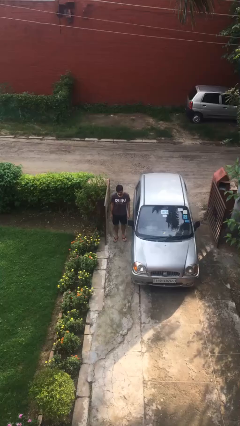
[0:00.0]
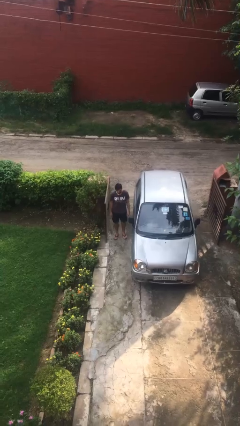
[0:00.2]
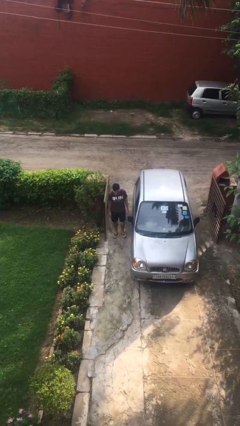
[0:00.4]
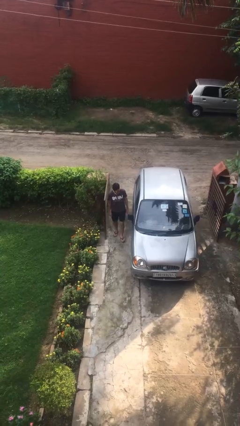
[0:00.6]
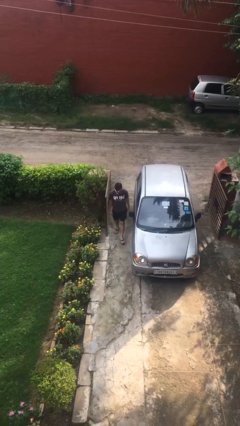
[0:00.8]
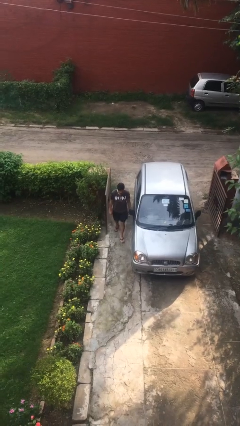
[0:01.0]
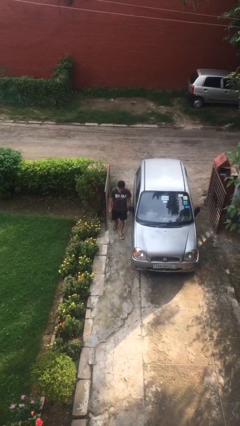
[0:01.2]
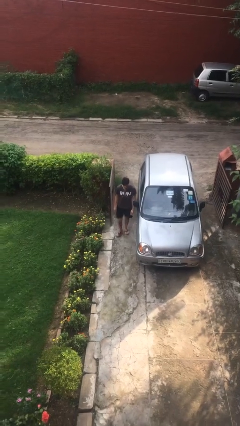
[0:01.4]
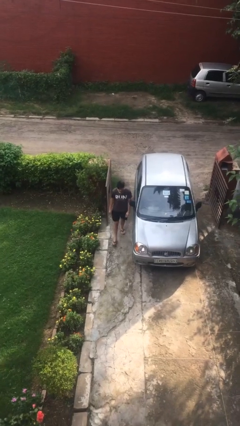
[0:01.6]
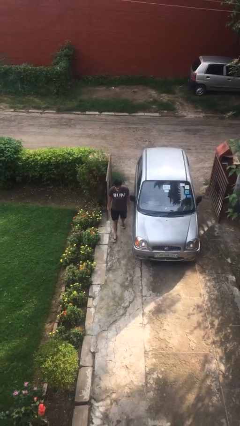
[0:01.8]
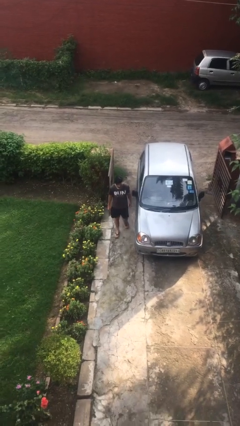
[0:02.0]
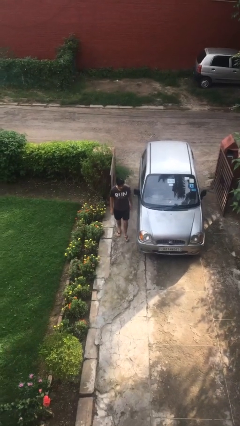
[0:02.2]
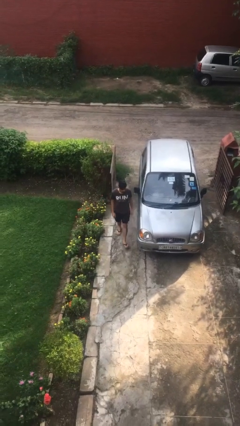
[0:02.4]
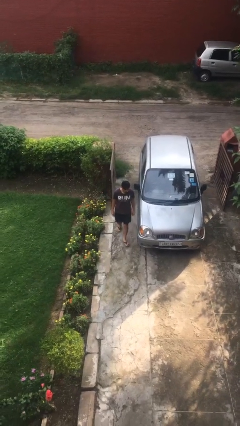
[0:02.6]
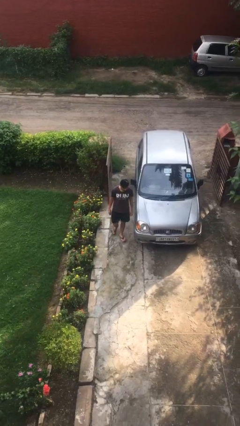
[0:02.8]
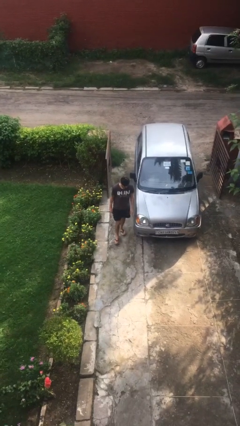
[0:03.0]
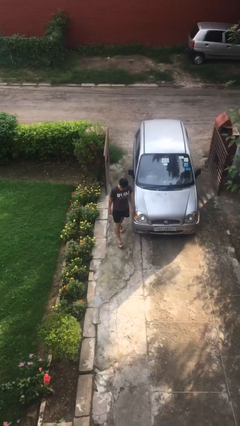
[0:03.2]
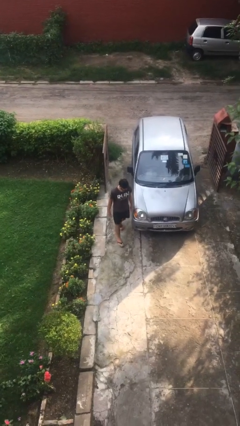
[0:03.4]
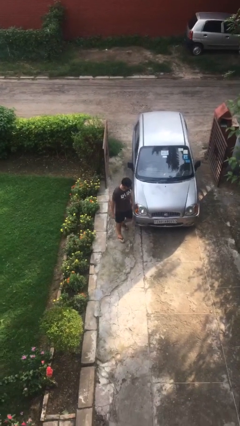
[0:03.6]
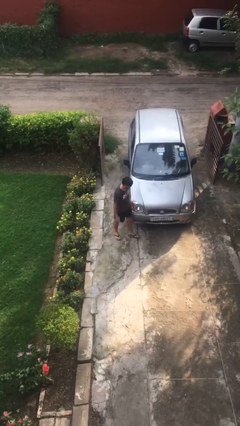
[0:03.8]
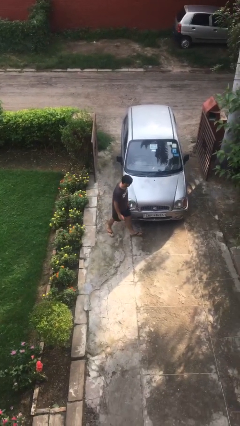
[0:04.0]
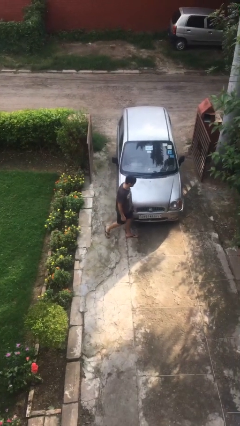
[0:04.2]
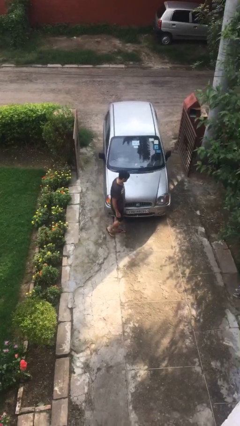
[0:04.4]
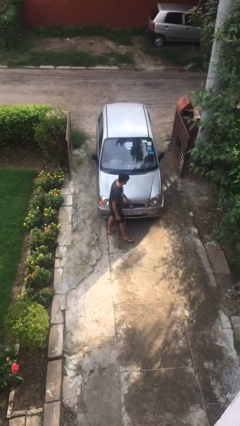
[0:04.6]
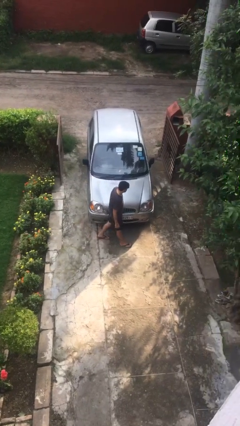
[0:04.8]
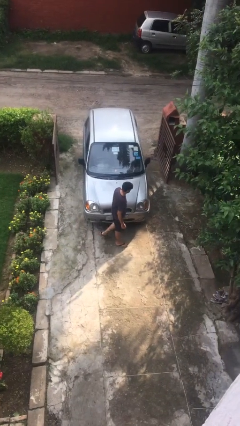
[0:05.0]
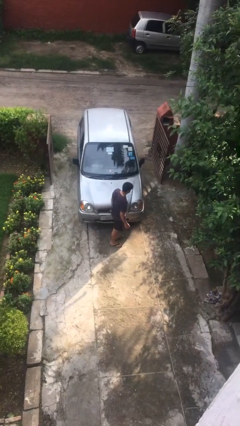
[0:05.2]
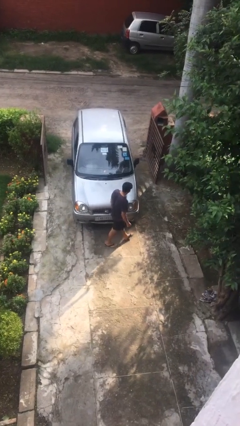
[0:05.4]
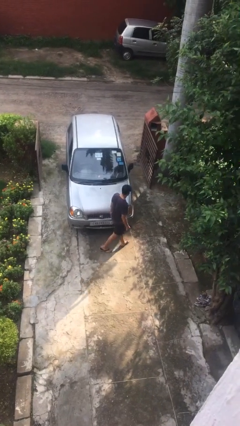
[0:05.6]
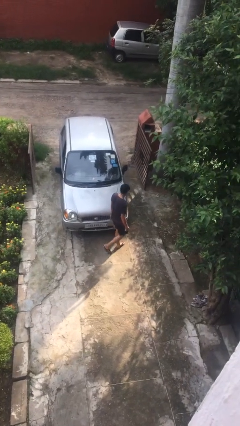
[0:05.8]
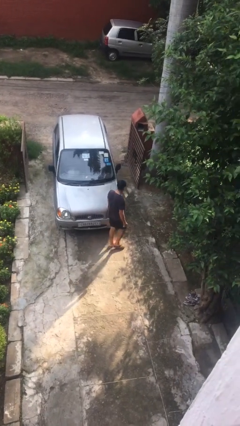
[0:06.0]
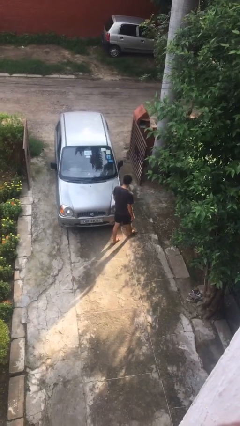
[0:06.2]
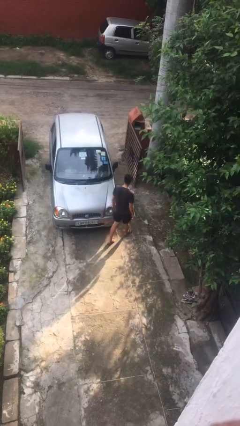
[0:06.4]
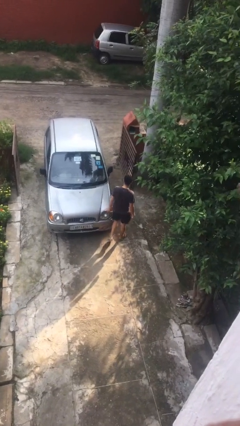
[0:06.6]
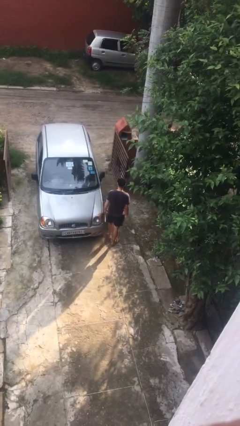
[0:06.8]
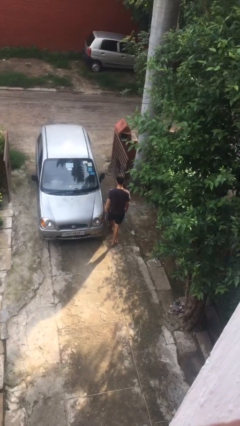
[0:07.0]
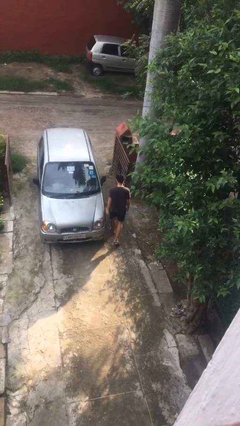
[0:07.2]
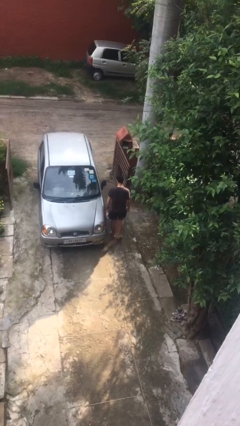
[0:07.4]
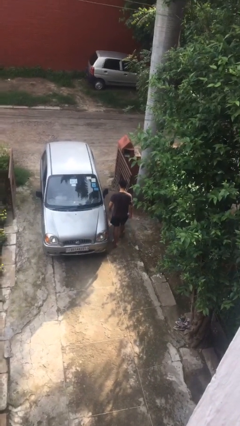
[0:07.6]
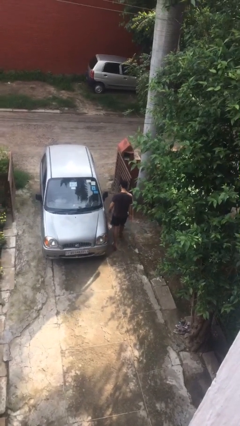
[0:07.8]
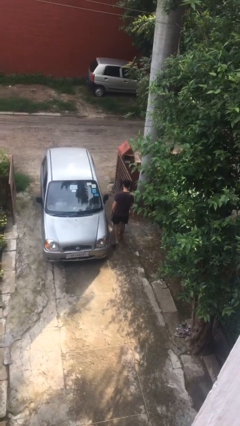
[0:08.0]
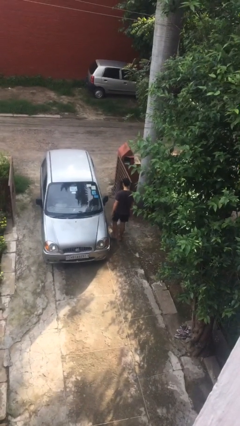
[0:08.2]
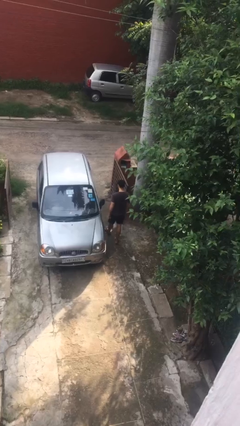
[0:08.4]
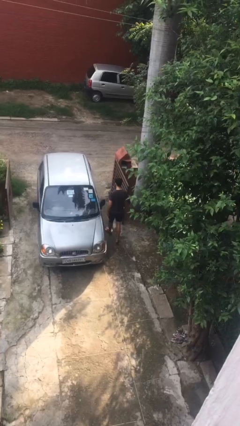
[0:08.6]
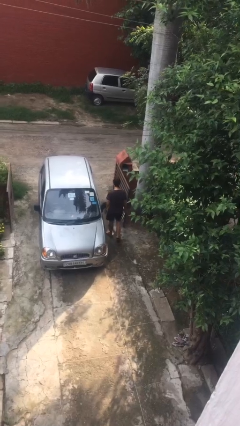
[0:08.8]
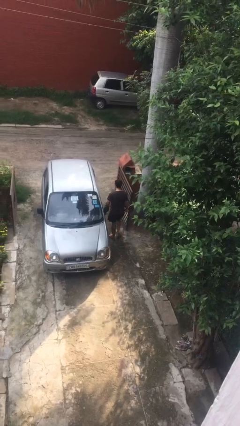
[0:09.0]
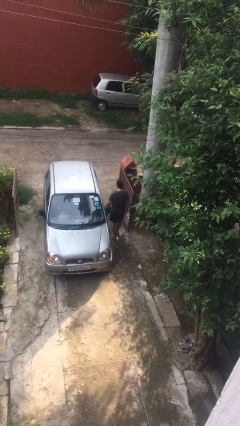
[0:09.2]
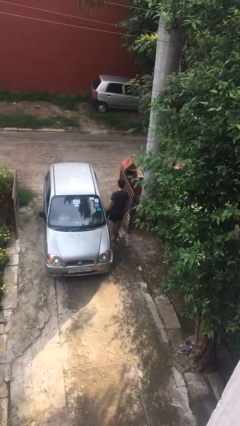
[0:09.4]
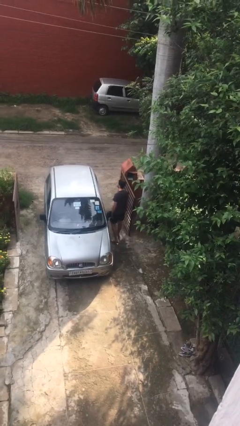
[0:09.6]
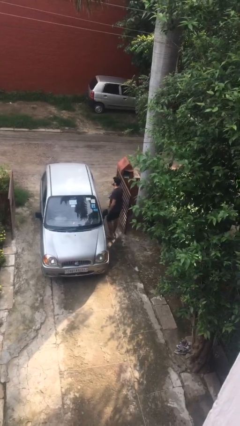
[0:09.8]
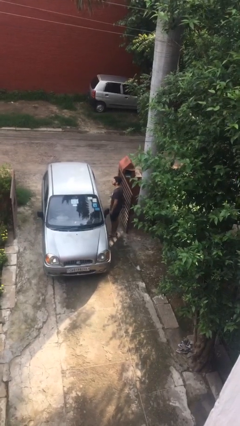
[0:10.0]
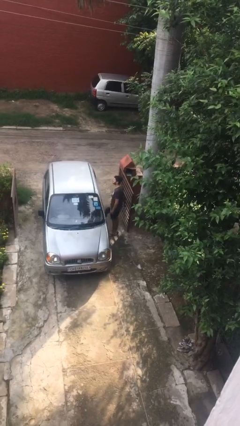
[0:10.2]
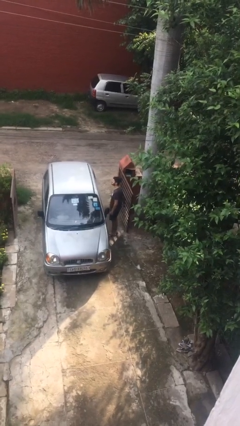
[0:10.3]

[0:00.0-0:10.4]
person walks around car

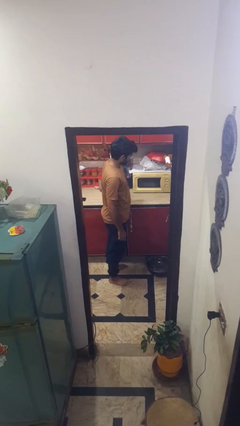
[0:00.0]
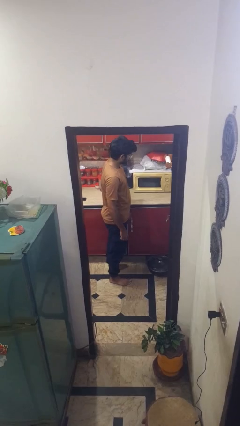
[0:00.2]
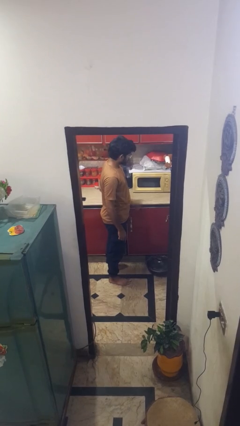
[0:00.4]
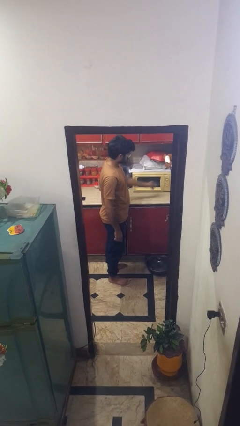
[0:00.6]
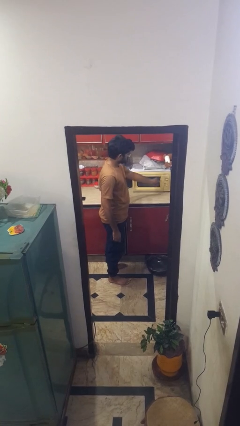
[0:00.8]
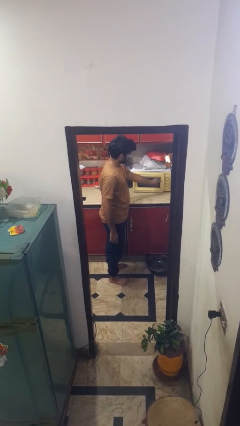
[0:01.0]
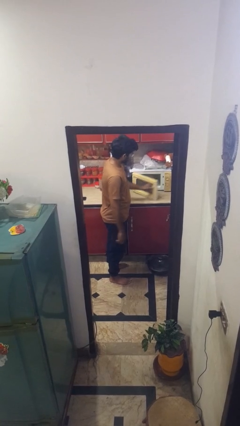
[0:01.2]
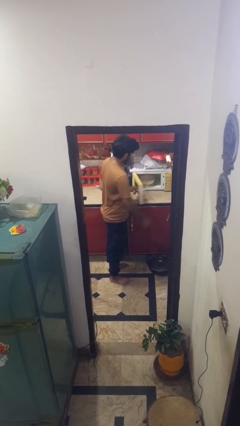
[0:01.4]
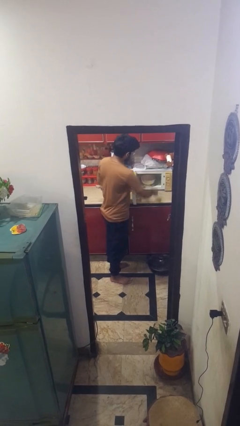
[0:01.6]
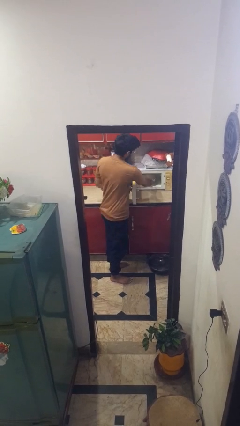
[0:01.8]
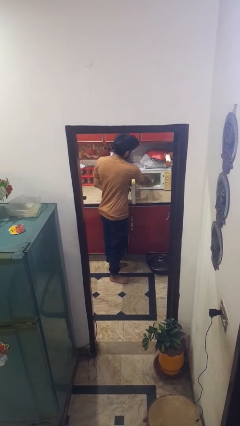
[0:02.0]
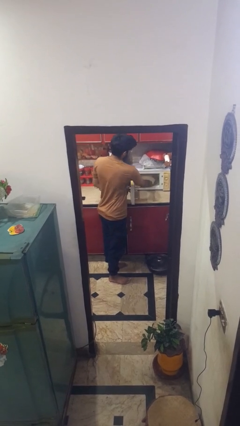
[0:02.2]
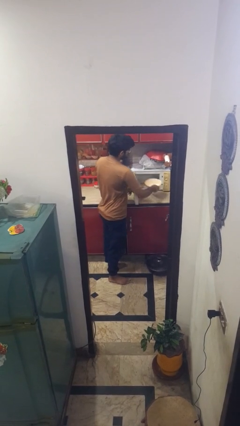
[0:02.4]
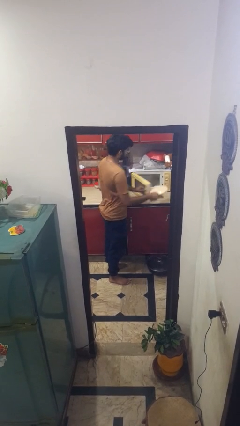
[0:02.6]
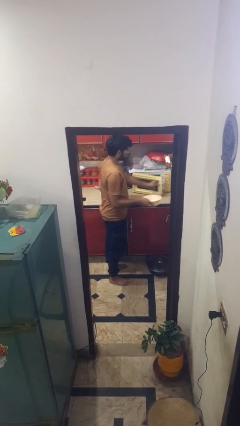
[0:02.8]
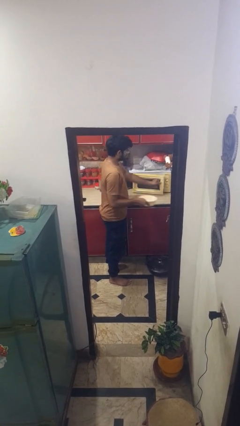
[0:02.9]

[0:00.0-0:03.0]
person takes object from microwave

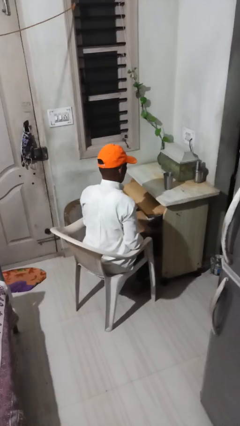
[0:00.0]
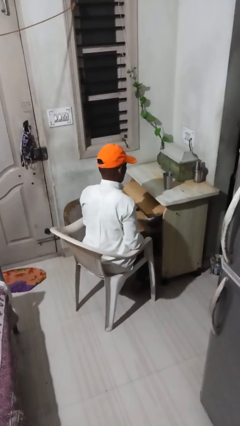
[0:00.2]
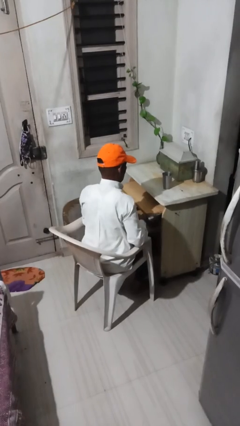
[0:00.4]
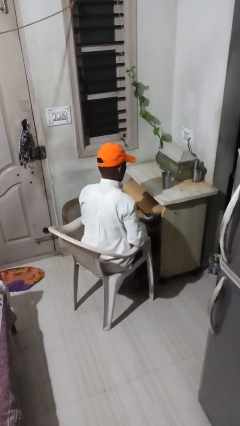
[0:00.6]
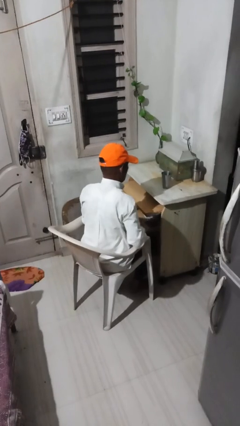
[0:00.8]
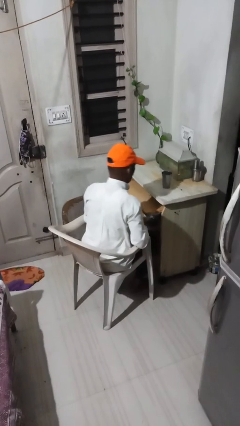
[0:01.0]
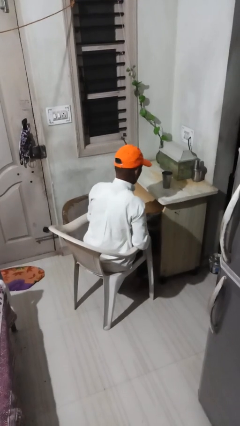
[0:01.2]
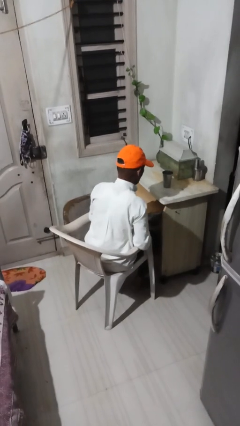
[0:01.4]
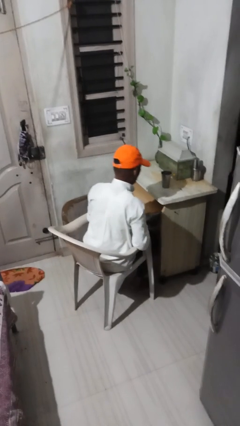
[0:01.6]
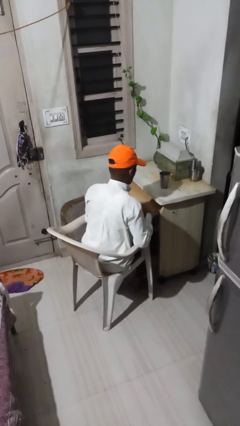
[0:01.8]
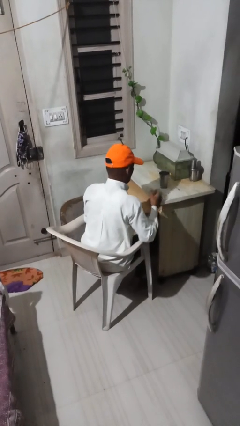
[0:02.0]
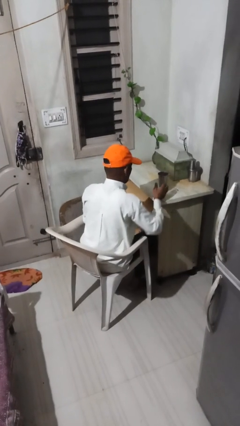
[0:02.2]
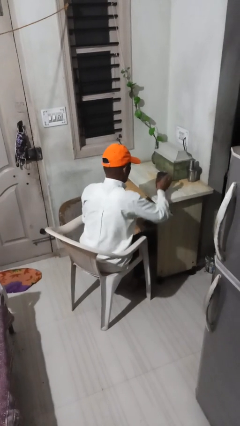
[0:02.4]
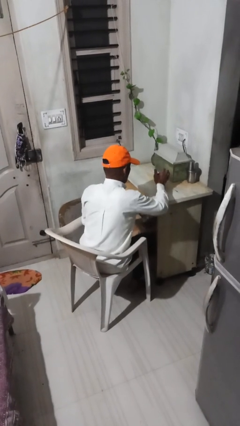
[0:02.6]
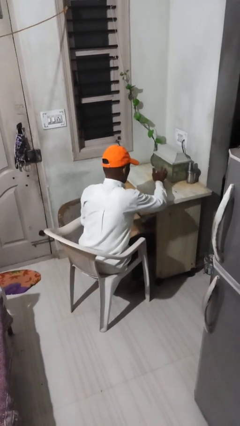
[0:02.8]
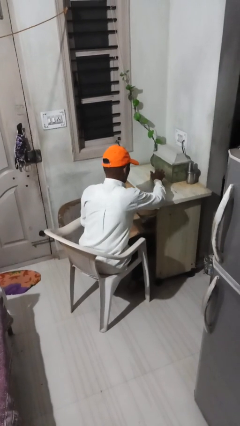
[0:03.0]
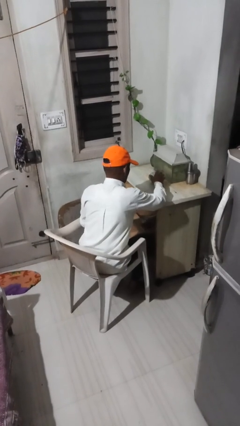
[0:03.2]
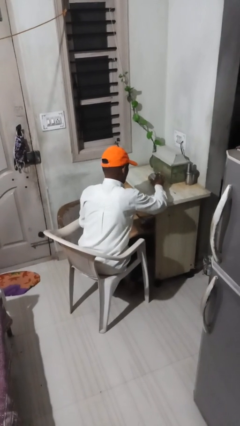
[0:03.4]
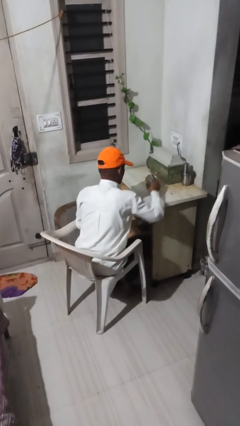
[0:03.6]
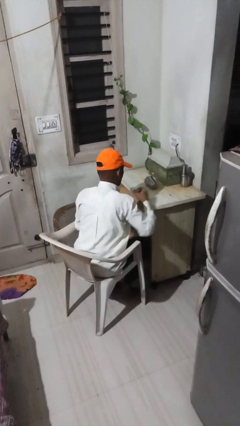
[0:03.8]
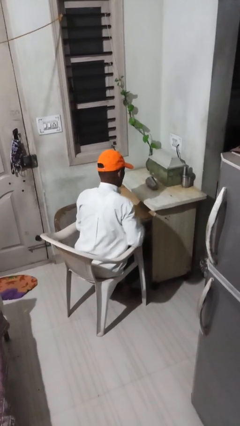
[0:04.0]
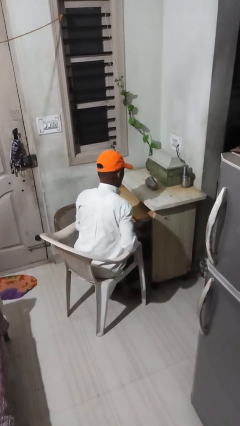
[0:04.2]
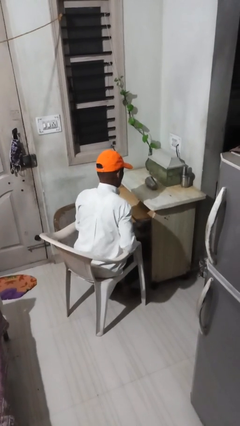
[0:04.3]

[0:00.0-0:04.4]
person knocks over glass

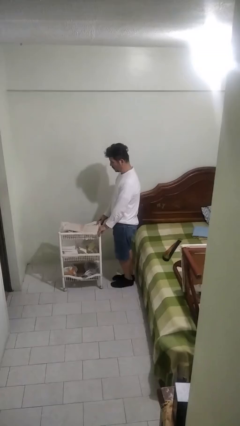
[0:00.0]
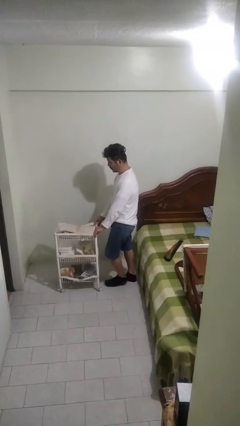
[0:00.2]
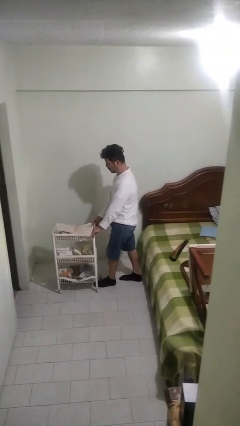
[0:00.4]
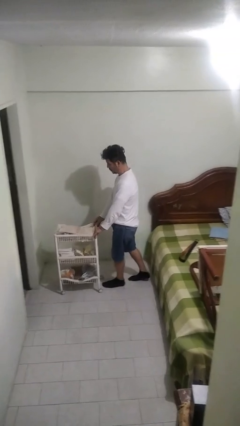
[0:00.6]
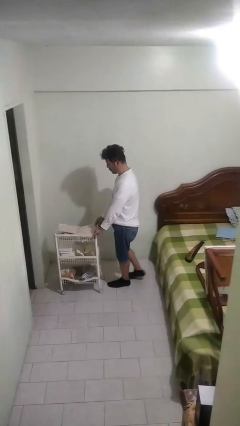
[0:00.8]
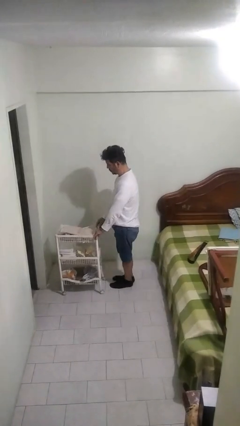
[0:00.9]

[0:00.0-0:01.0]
person pushes wheeled cart
